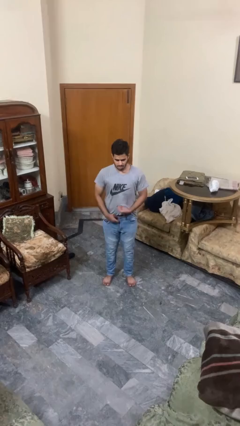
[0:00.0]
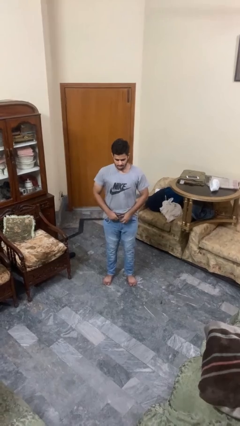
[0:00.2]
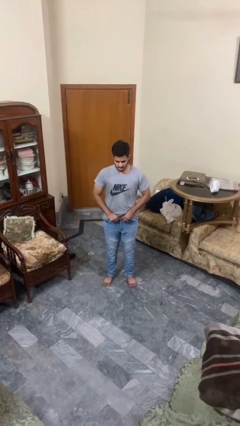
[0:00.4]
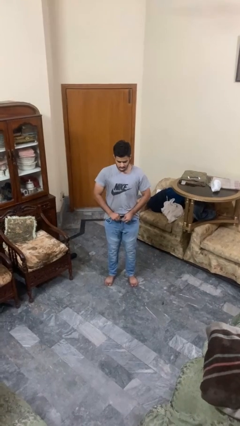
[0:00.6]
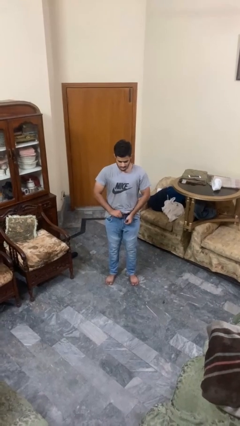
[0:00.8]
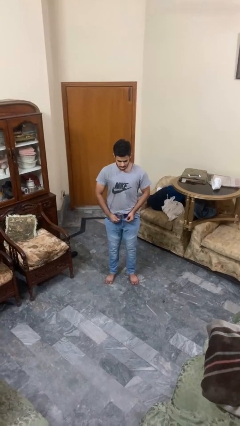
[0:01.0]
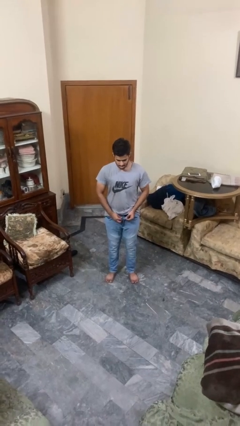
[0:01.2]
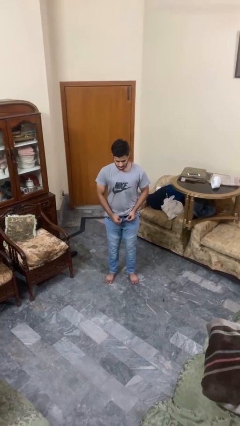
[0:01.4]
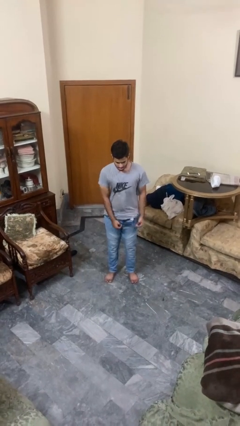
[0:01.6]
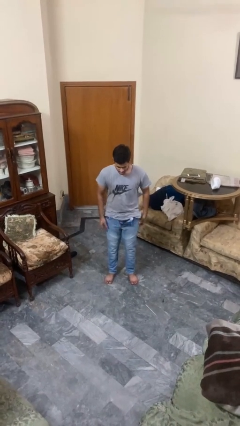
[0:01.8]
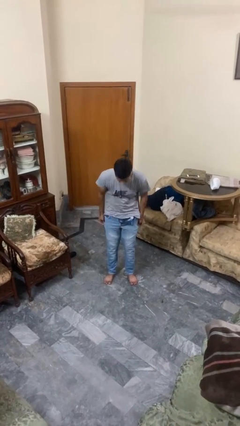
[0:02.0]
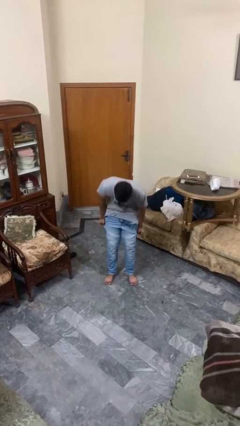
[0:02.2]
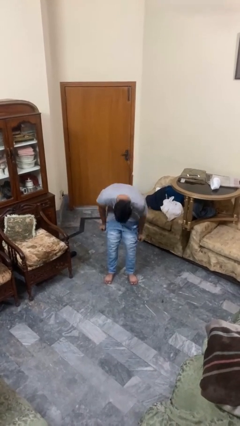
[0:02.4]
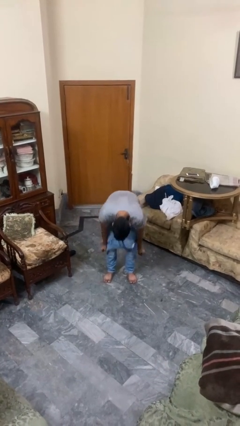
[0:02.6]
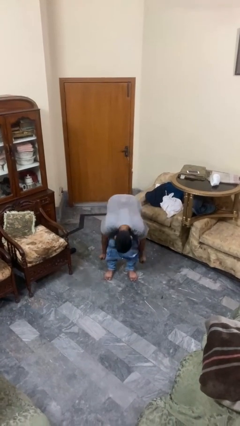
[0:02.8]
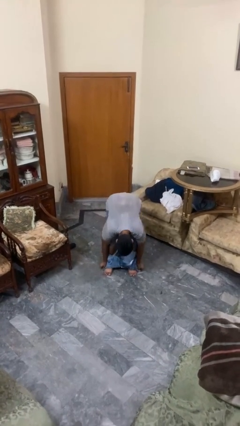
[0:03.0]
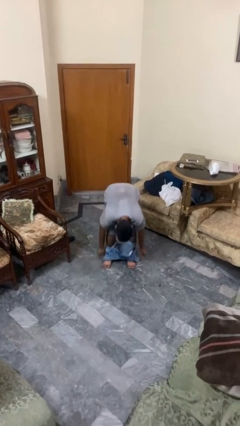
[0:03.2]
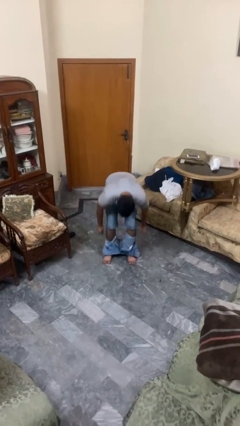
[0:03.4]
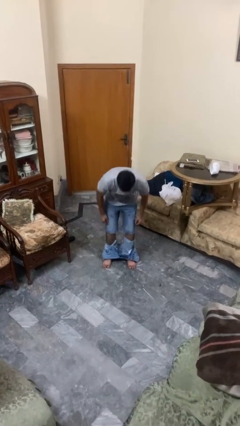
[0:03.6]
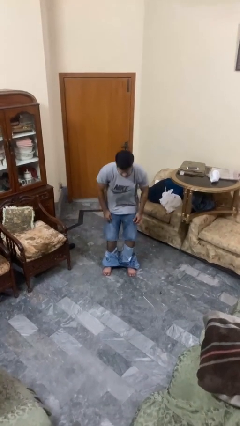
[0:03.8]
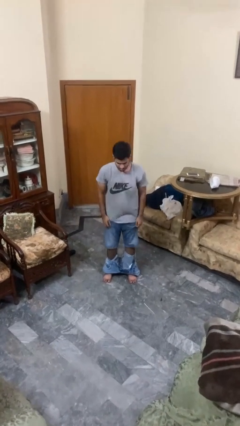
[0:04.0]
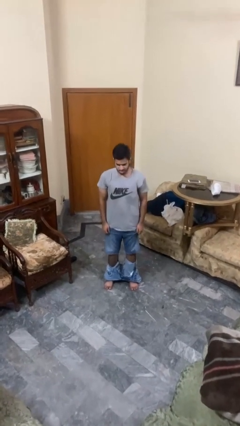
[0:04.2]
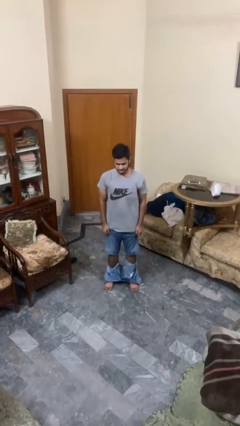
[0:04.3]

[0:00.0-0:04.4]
person takes off pants

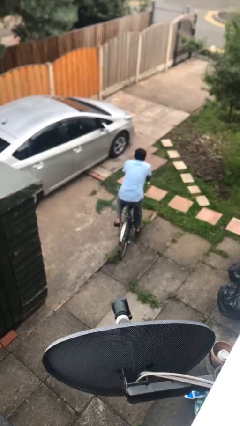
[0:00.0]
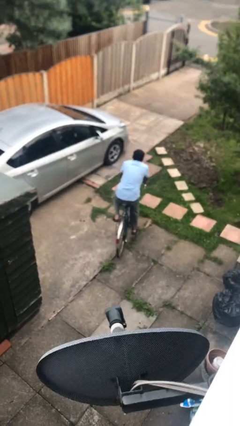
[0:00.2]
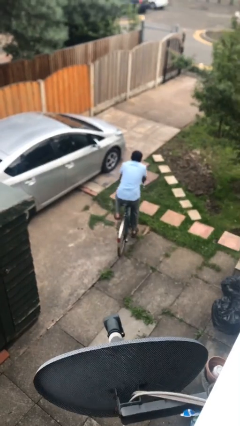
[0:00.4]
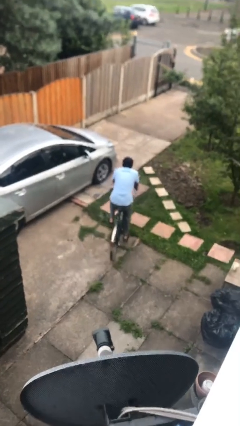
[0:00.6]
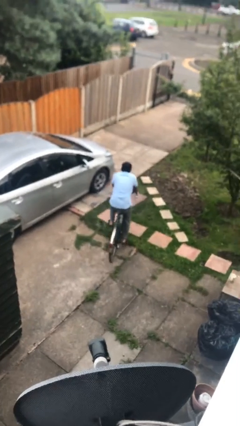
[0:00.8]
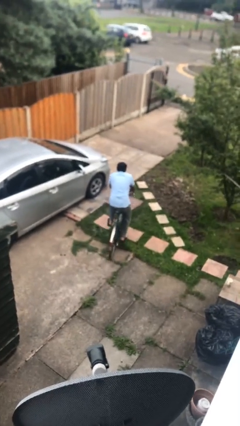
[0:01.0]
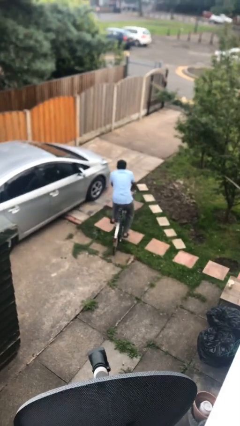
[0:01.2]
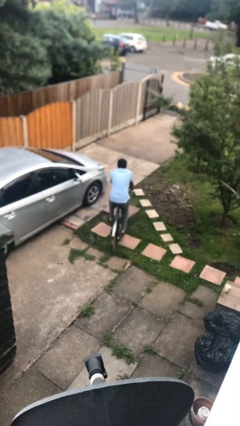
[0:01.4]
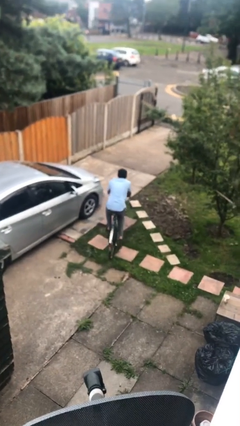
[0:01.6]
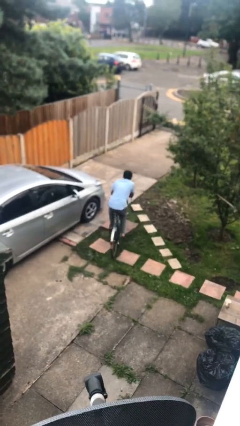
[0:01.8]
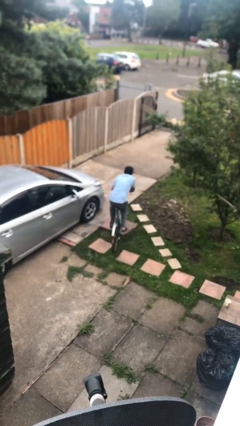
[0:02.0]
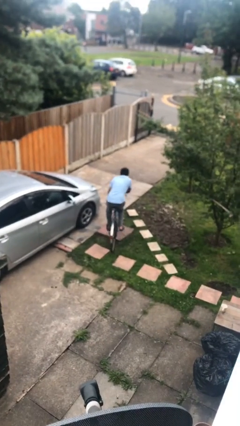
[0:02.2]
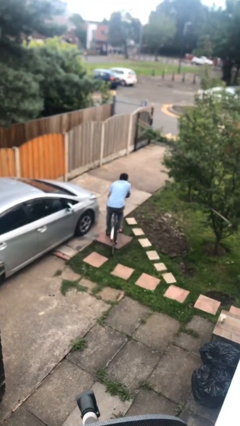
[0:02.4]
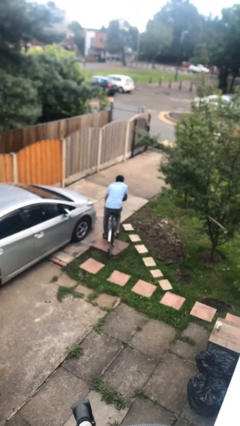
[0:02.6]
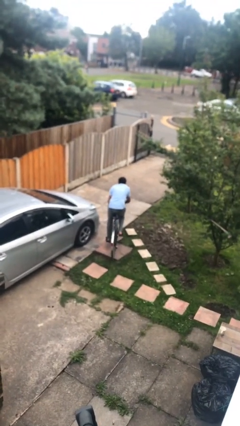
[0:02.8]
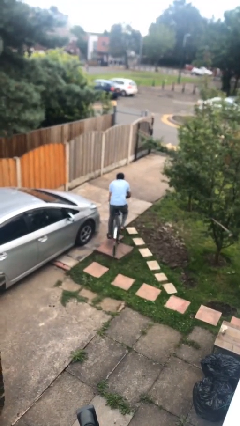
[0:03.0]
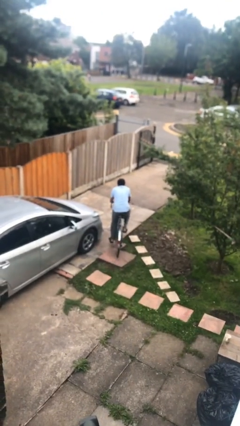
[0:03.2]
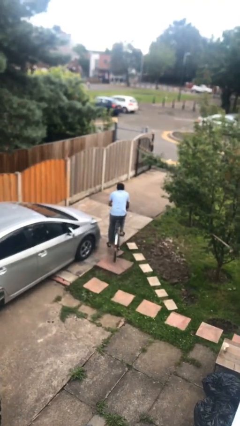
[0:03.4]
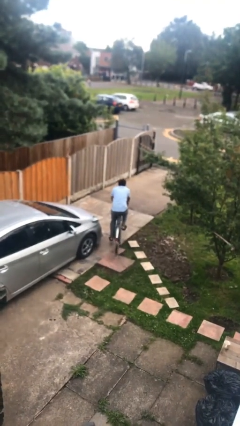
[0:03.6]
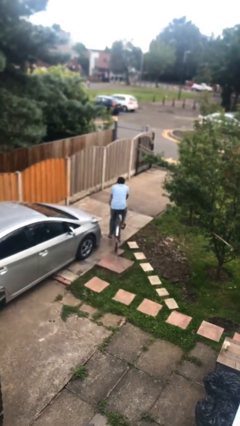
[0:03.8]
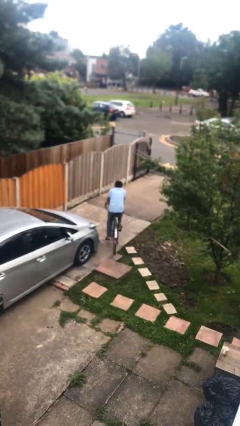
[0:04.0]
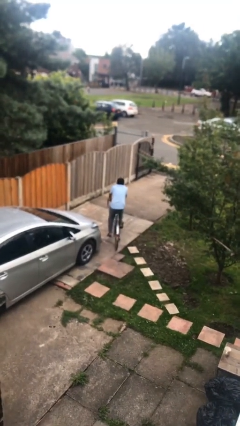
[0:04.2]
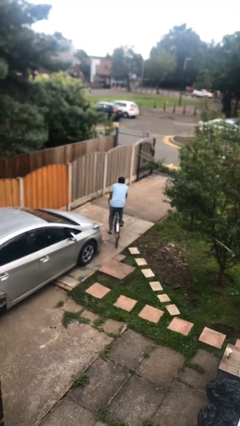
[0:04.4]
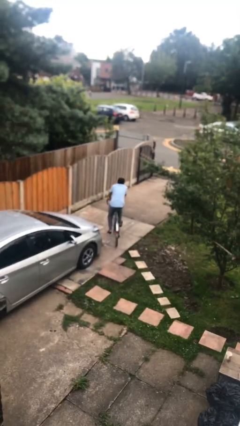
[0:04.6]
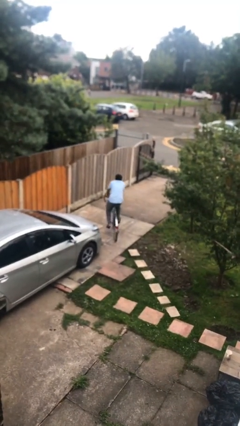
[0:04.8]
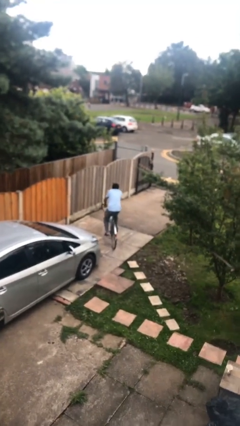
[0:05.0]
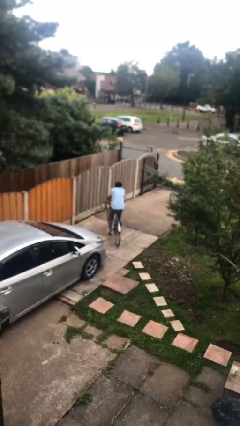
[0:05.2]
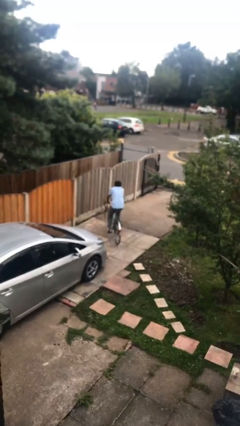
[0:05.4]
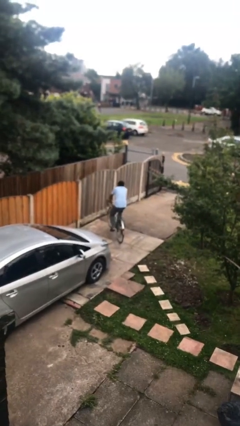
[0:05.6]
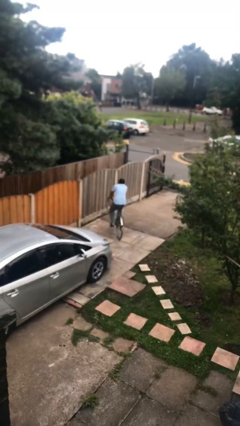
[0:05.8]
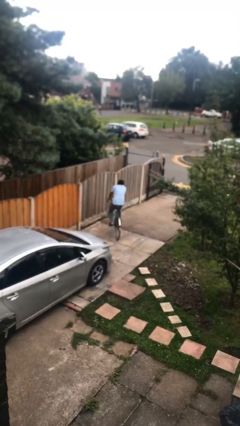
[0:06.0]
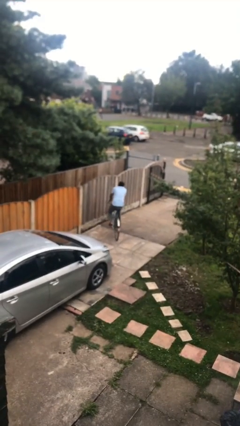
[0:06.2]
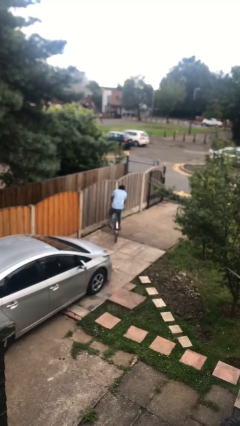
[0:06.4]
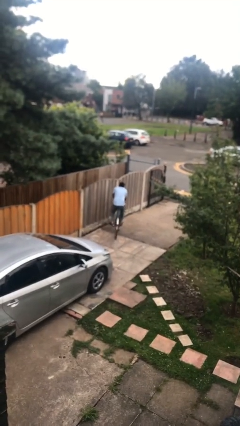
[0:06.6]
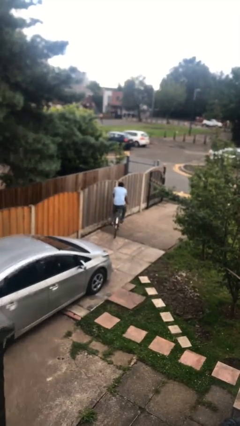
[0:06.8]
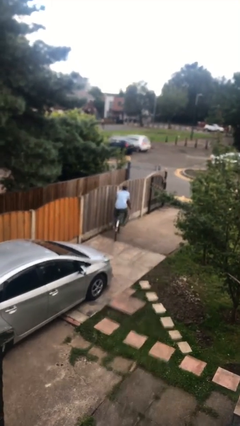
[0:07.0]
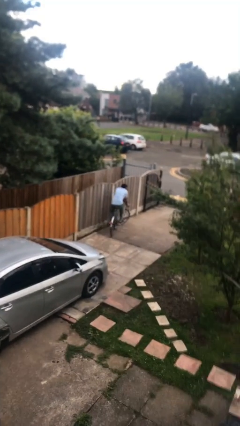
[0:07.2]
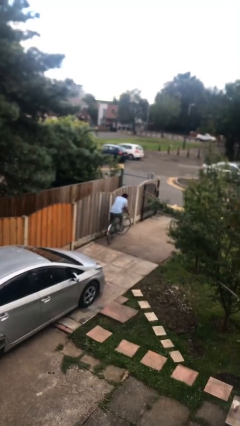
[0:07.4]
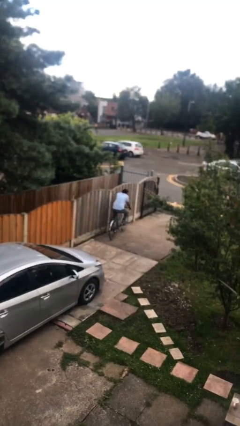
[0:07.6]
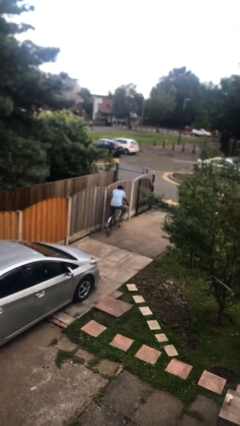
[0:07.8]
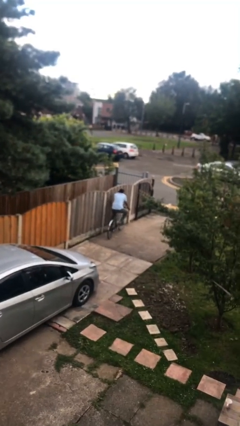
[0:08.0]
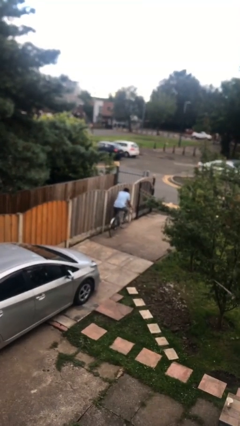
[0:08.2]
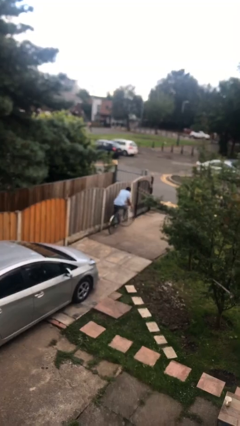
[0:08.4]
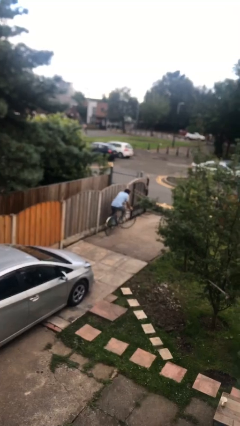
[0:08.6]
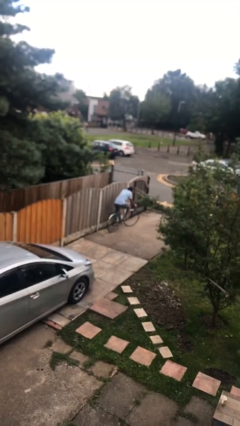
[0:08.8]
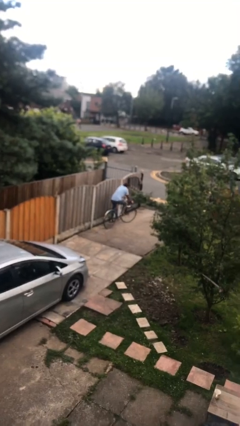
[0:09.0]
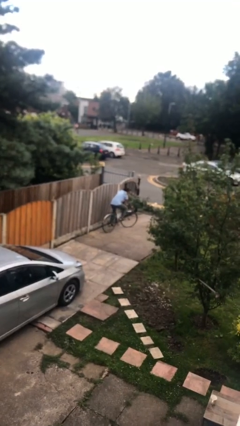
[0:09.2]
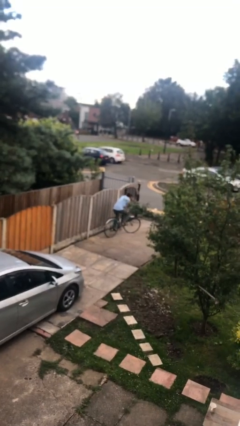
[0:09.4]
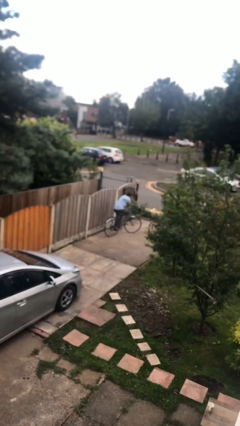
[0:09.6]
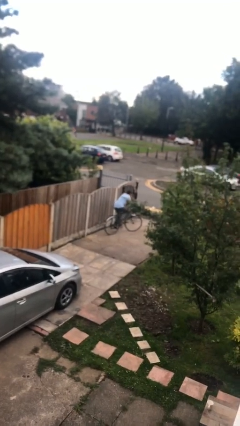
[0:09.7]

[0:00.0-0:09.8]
person rides bicycle

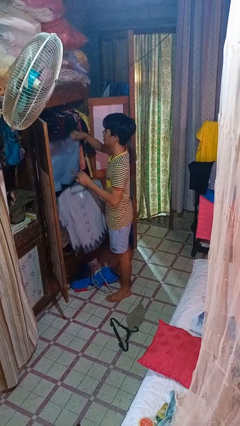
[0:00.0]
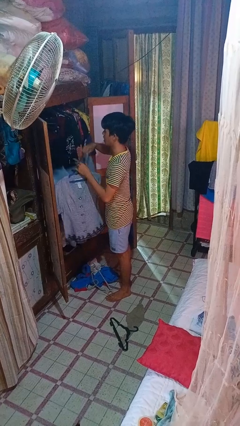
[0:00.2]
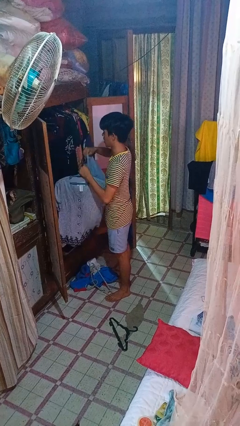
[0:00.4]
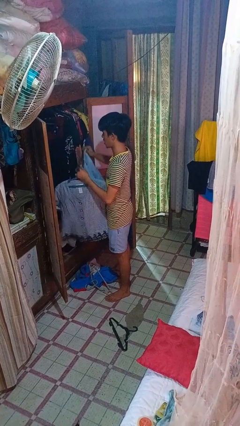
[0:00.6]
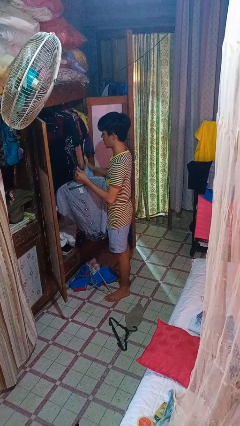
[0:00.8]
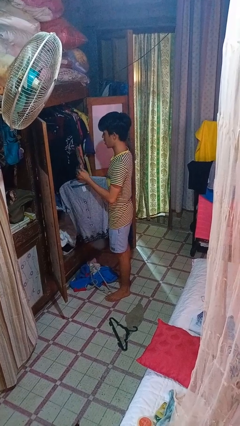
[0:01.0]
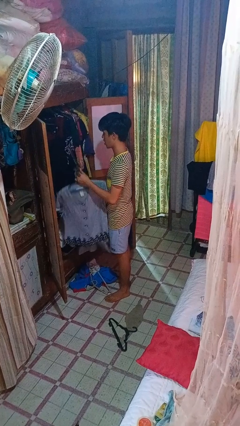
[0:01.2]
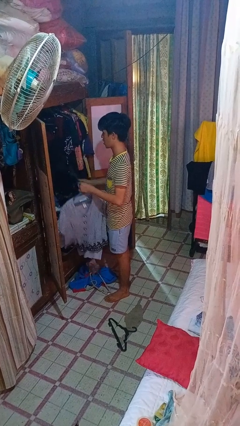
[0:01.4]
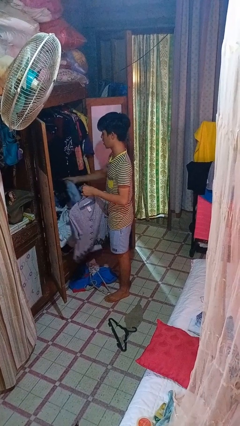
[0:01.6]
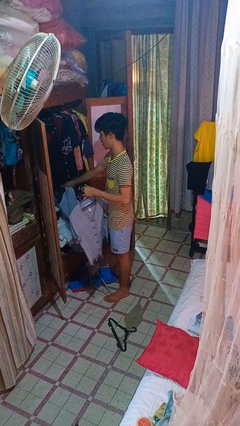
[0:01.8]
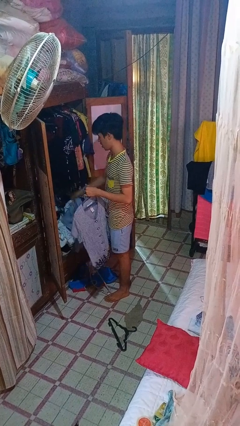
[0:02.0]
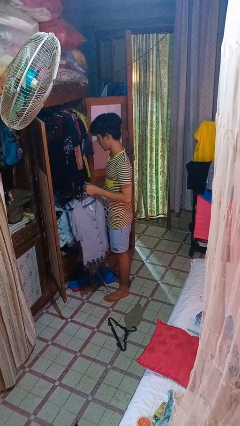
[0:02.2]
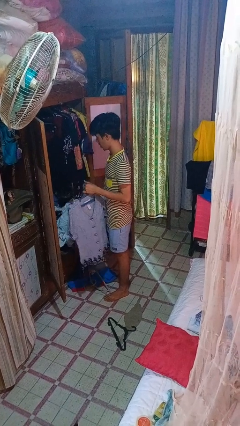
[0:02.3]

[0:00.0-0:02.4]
person takes clothes from closet

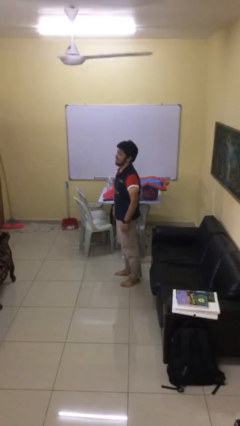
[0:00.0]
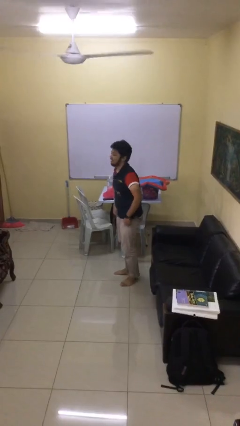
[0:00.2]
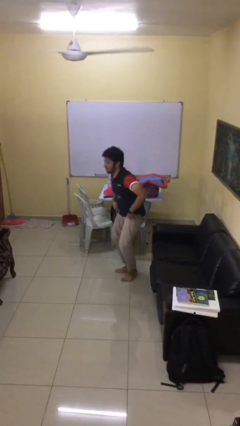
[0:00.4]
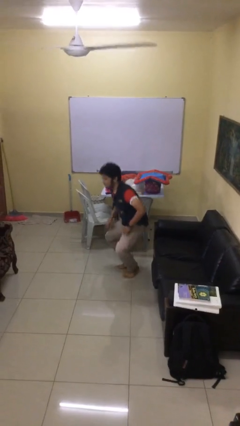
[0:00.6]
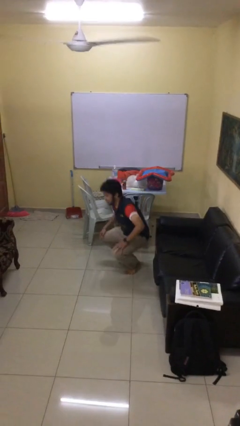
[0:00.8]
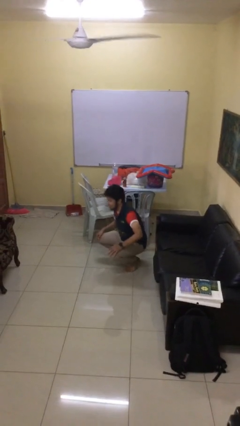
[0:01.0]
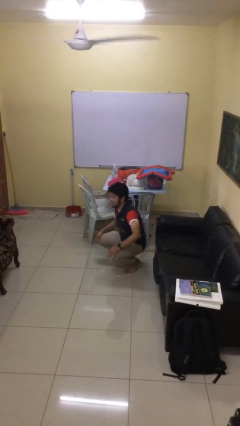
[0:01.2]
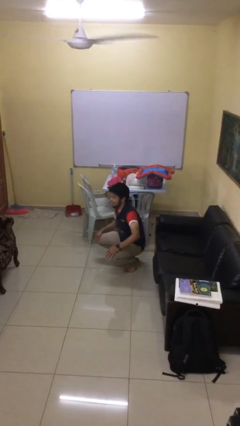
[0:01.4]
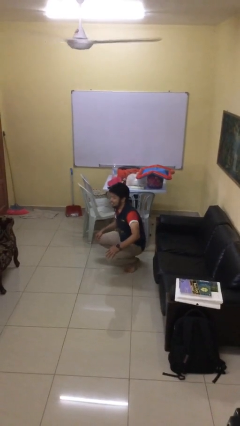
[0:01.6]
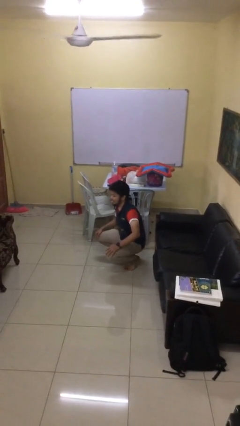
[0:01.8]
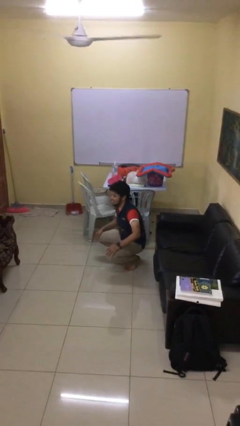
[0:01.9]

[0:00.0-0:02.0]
person squats
